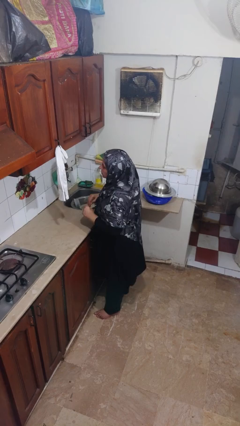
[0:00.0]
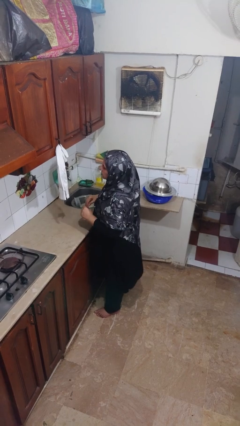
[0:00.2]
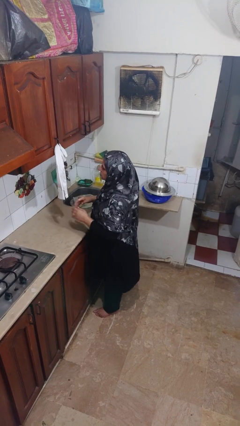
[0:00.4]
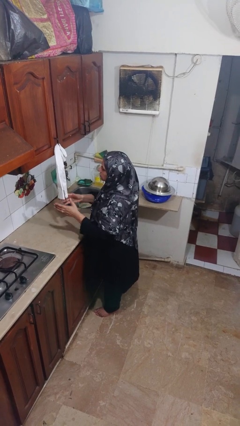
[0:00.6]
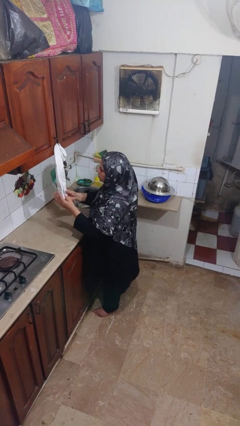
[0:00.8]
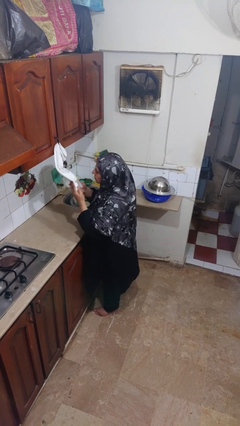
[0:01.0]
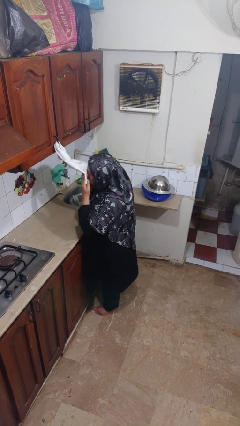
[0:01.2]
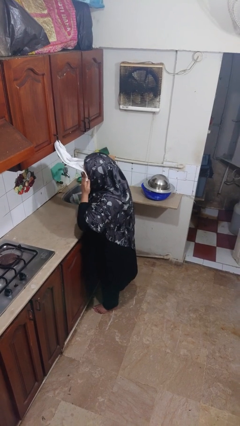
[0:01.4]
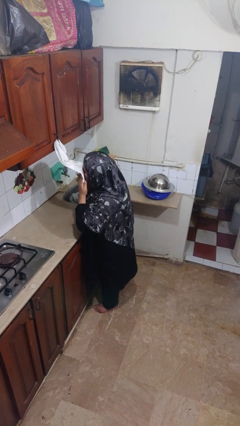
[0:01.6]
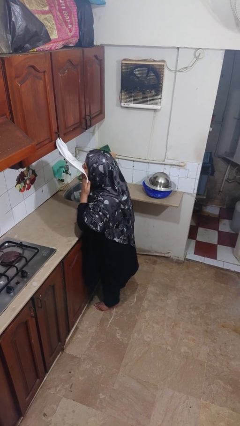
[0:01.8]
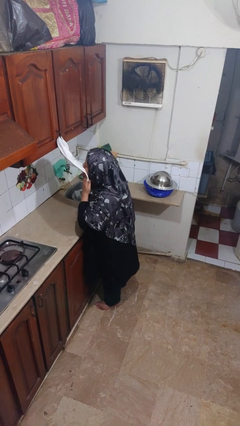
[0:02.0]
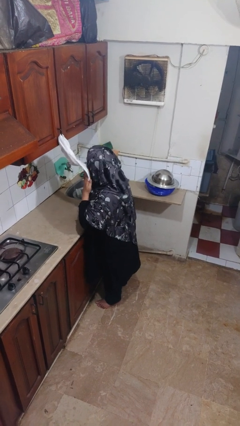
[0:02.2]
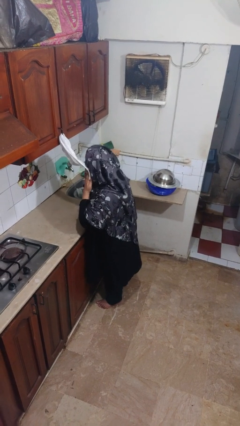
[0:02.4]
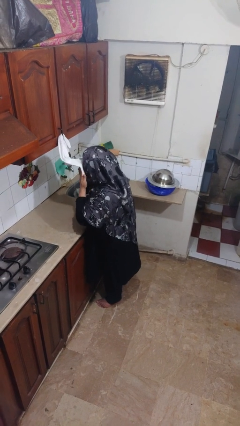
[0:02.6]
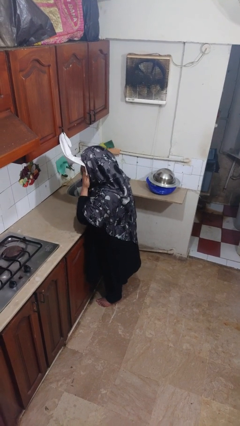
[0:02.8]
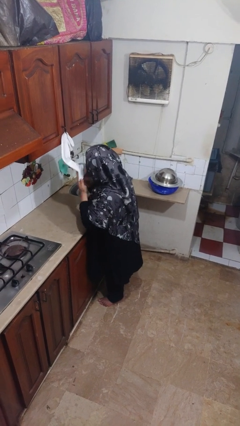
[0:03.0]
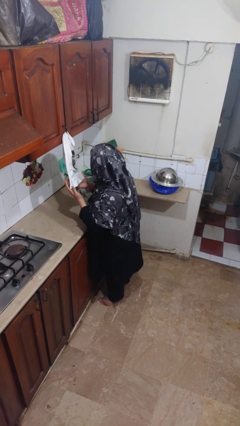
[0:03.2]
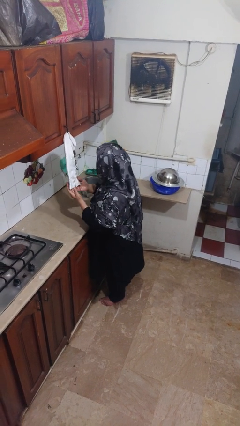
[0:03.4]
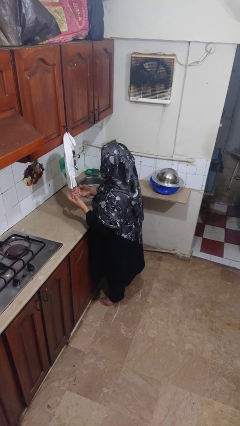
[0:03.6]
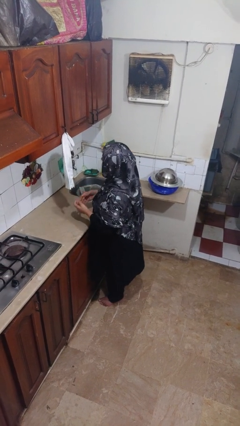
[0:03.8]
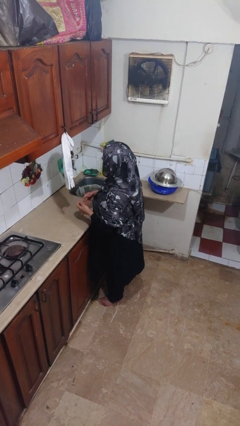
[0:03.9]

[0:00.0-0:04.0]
person dries face with towel

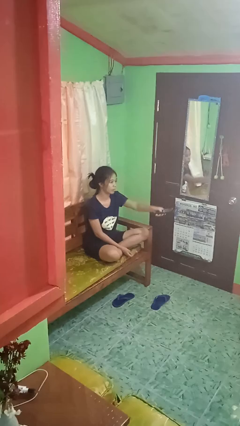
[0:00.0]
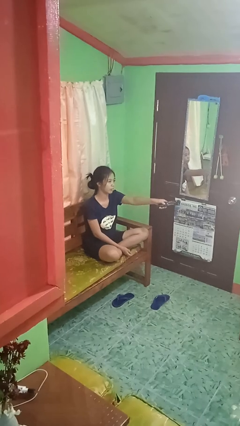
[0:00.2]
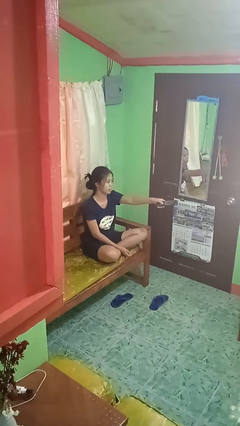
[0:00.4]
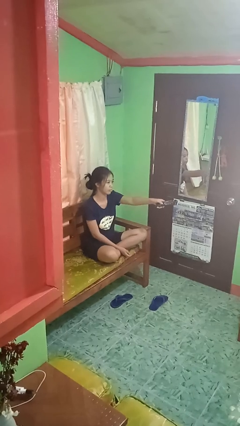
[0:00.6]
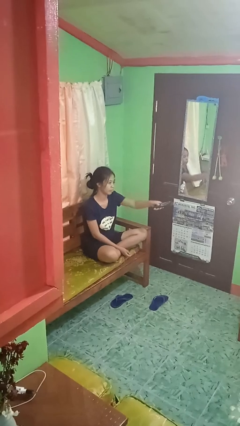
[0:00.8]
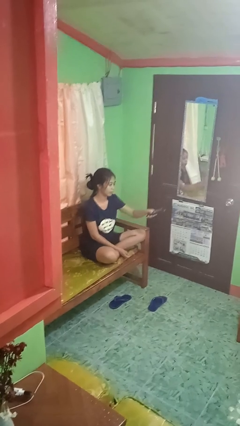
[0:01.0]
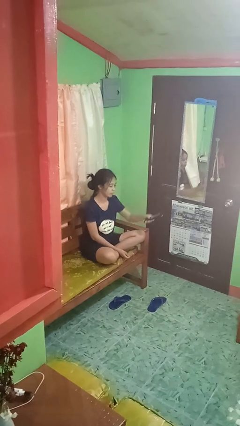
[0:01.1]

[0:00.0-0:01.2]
person uses television remote

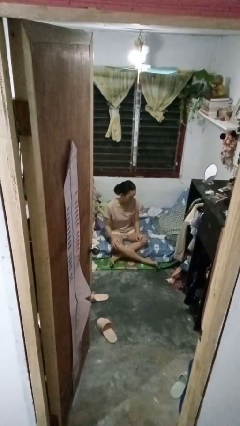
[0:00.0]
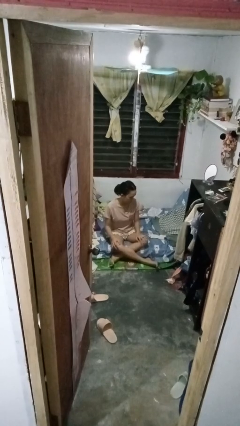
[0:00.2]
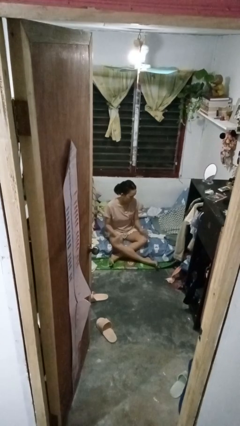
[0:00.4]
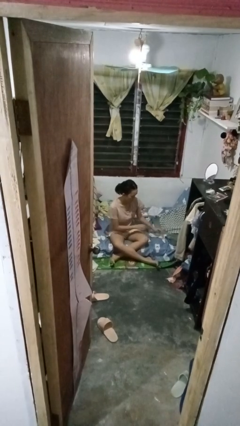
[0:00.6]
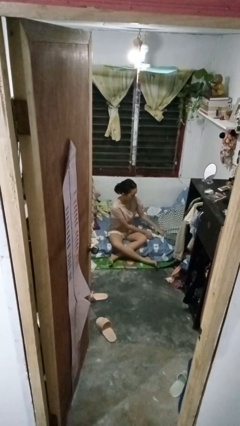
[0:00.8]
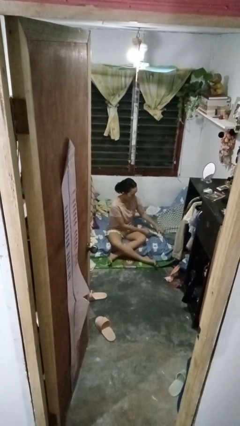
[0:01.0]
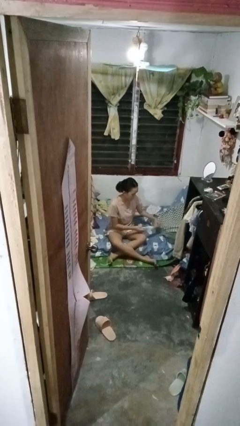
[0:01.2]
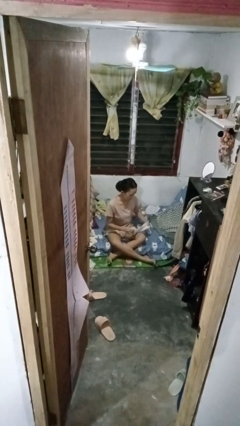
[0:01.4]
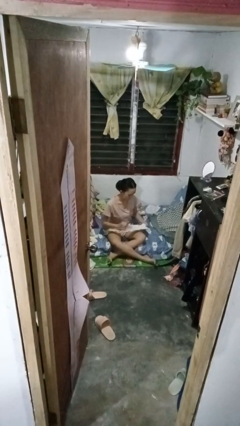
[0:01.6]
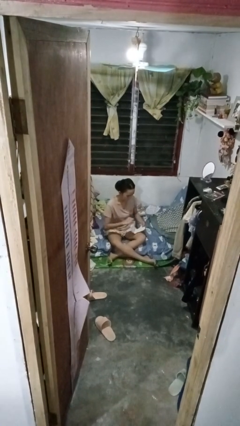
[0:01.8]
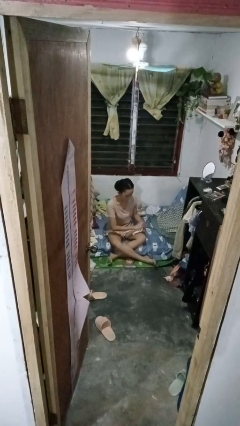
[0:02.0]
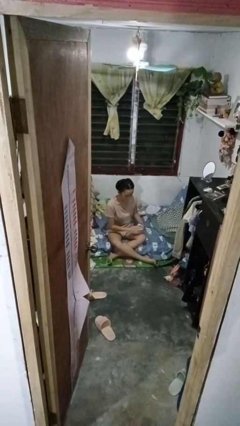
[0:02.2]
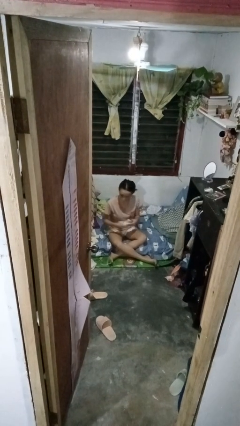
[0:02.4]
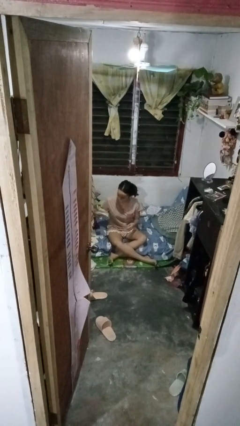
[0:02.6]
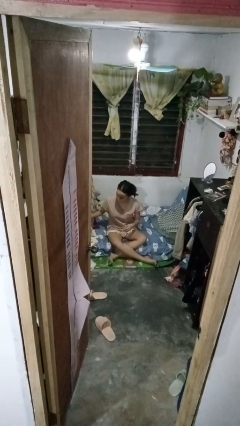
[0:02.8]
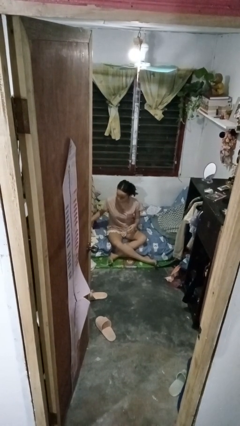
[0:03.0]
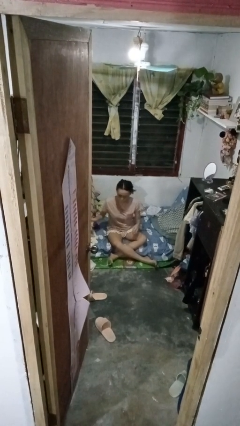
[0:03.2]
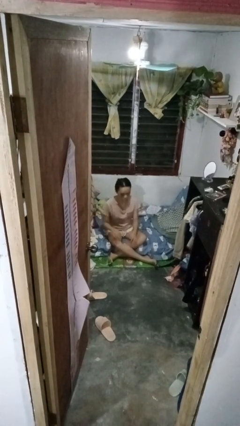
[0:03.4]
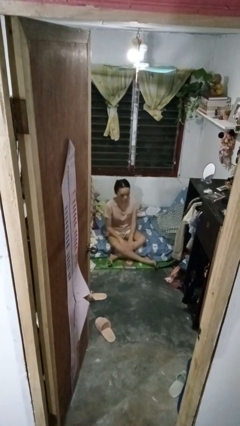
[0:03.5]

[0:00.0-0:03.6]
person folds socks

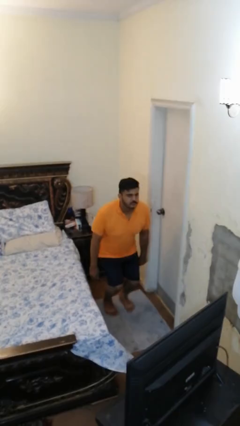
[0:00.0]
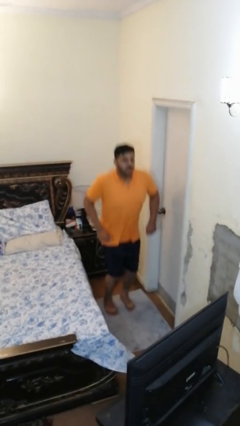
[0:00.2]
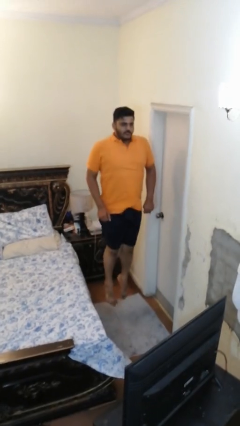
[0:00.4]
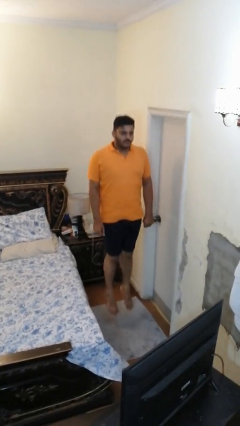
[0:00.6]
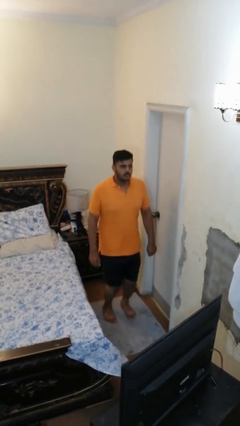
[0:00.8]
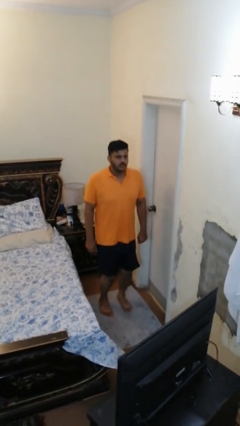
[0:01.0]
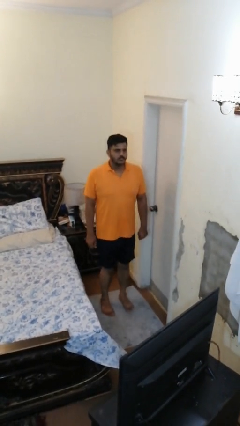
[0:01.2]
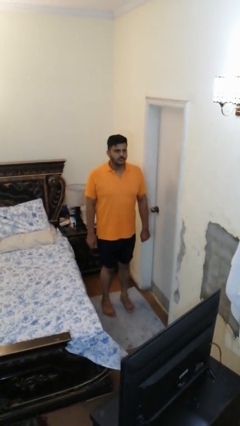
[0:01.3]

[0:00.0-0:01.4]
person jumps

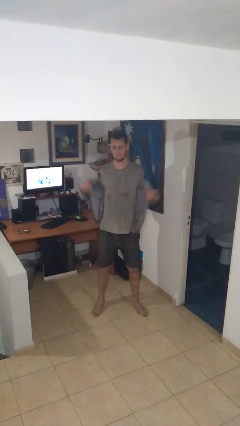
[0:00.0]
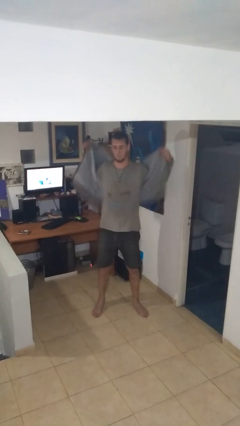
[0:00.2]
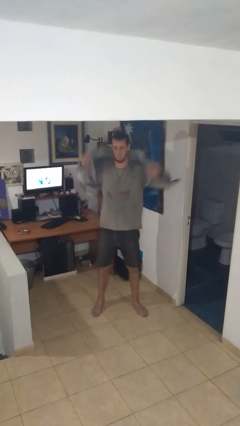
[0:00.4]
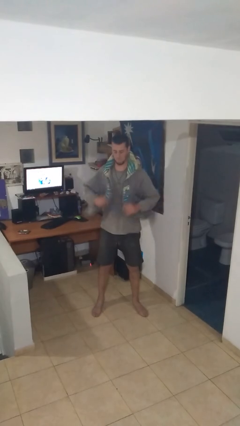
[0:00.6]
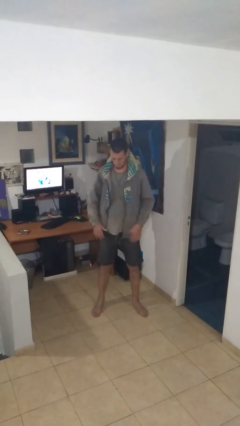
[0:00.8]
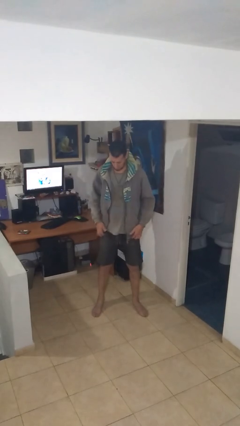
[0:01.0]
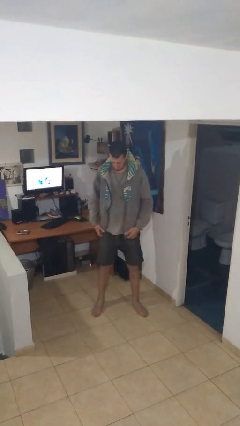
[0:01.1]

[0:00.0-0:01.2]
person puts on jacket

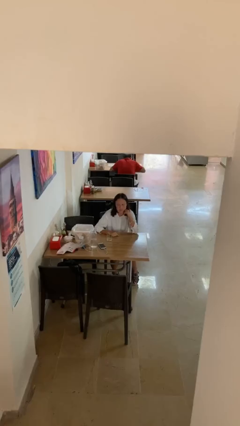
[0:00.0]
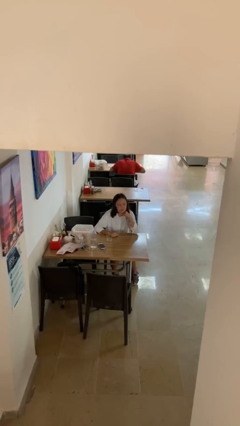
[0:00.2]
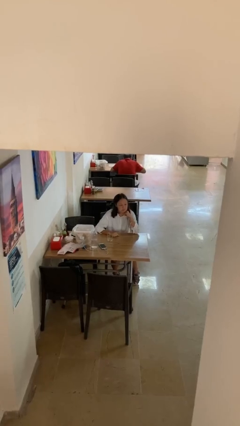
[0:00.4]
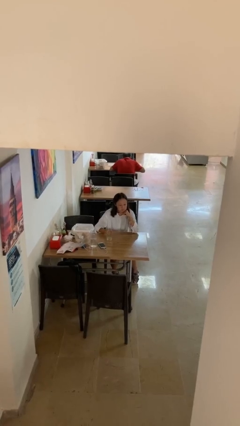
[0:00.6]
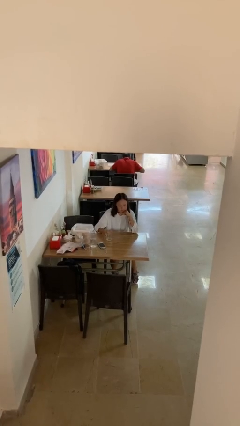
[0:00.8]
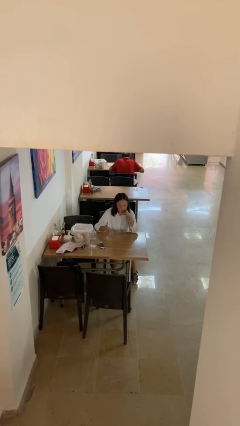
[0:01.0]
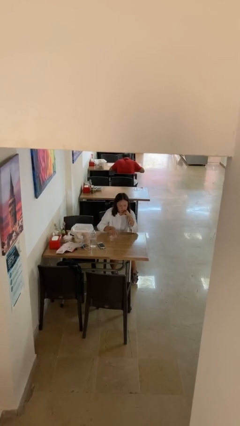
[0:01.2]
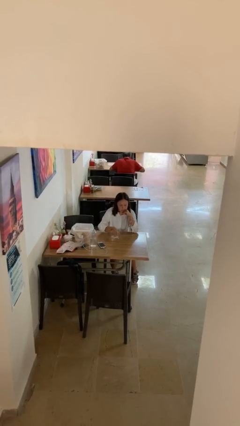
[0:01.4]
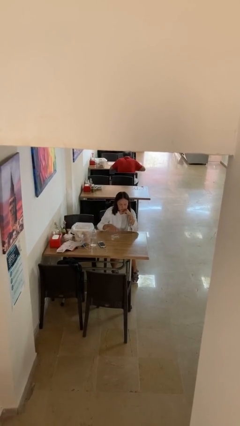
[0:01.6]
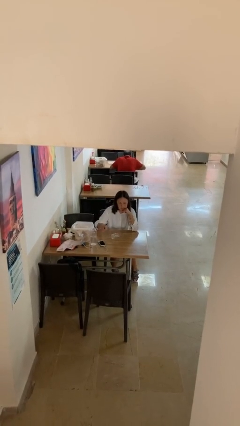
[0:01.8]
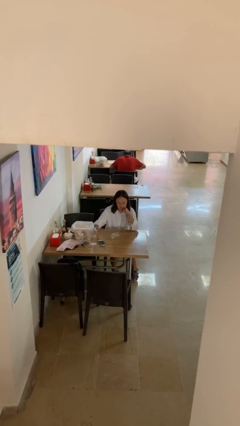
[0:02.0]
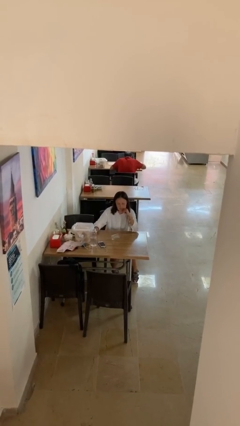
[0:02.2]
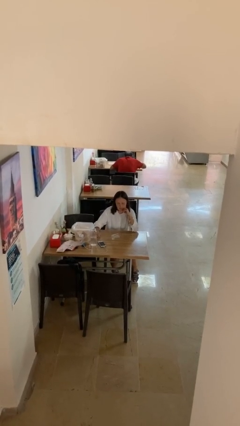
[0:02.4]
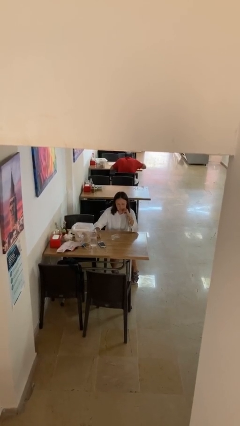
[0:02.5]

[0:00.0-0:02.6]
person knocks over glass

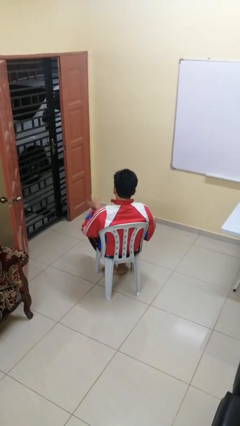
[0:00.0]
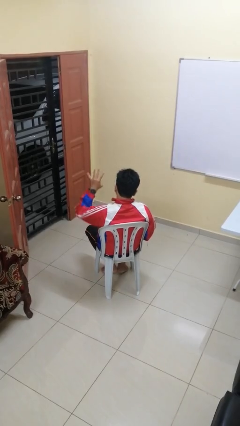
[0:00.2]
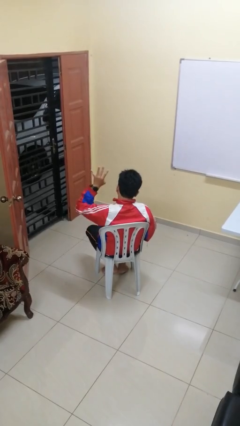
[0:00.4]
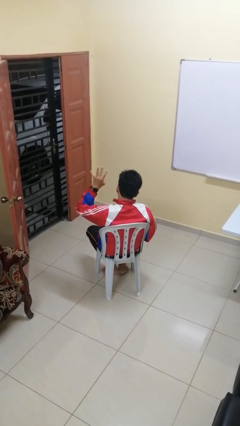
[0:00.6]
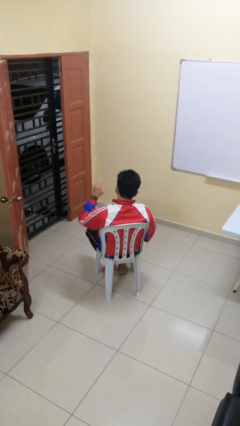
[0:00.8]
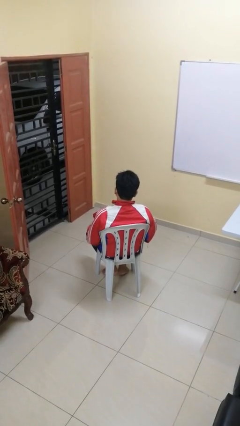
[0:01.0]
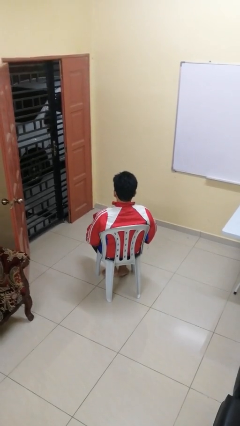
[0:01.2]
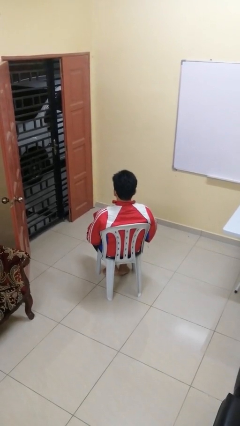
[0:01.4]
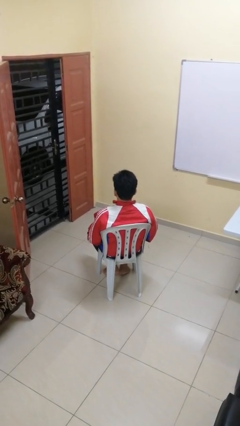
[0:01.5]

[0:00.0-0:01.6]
person gestures number four

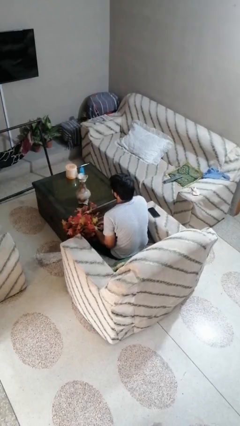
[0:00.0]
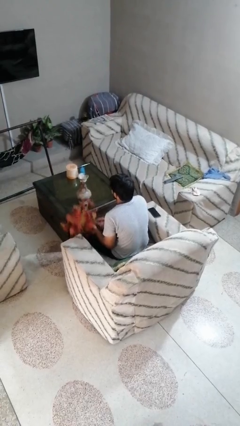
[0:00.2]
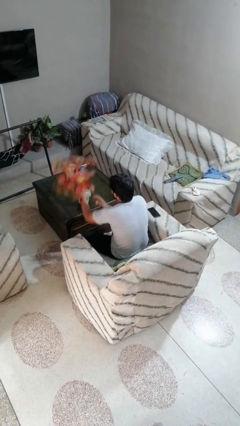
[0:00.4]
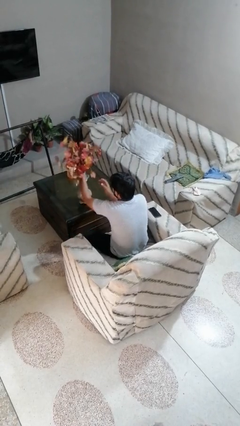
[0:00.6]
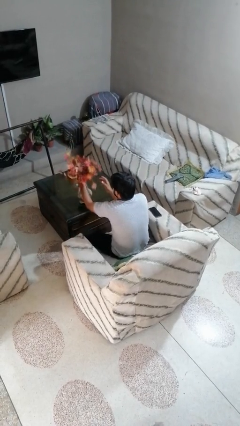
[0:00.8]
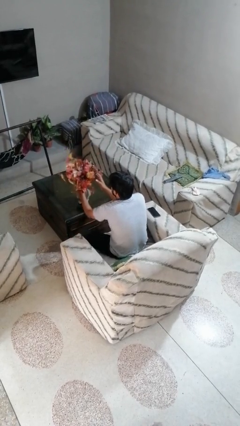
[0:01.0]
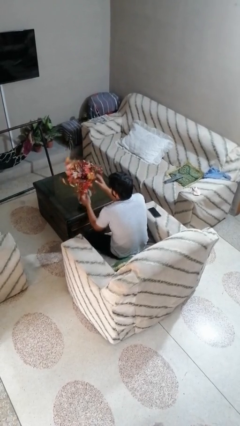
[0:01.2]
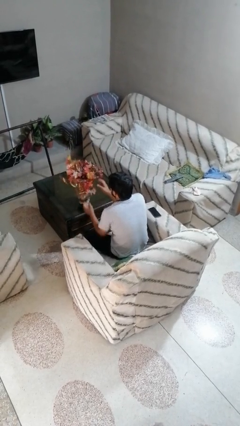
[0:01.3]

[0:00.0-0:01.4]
person arranges flowers in vase
